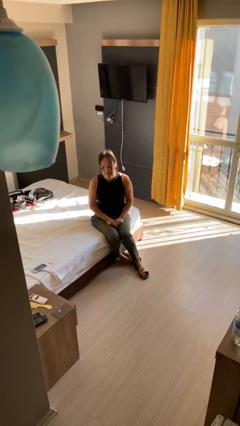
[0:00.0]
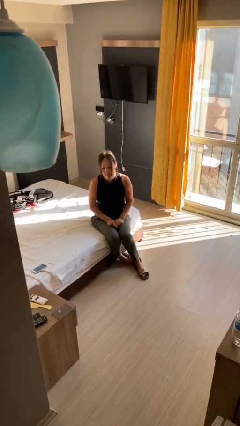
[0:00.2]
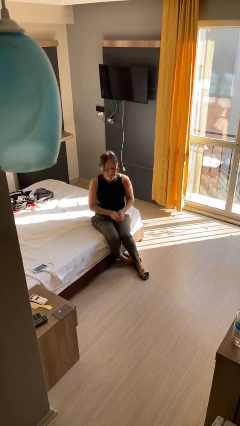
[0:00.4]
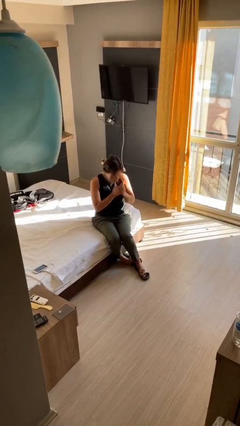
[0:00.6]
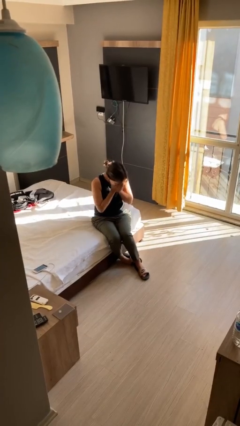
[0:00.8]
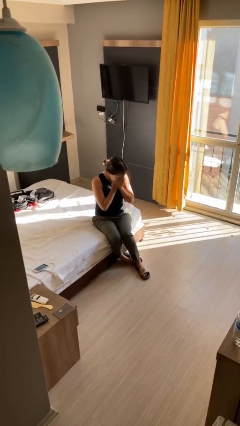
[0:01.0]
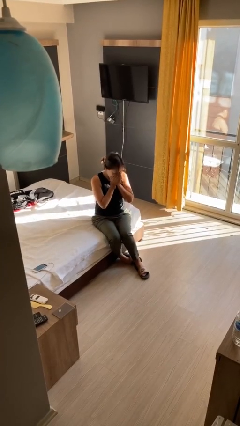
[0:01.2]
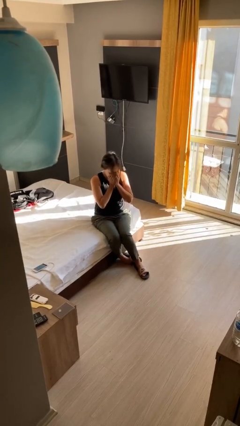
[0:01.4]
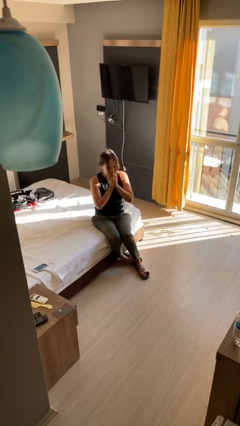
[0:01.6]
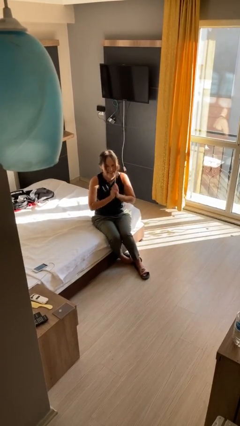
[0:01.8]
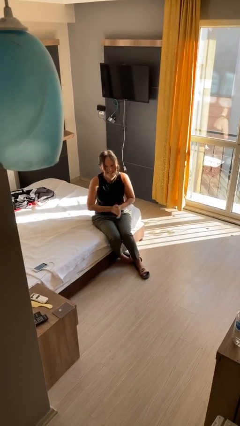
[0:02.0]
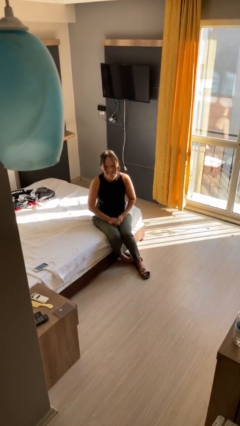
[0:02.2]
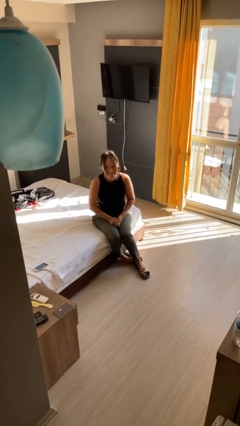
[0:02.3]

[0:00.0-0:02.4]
person sneezes into hand

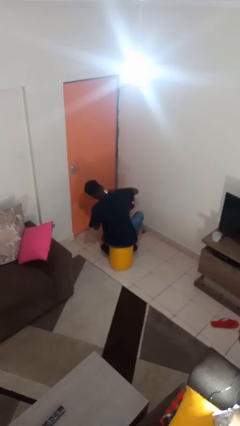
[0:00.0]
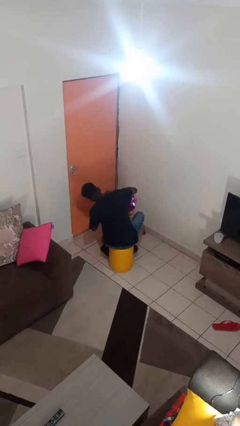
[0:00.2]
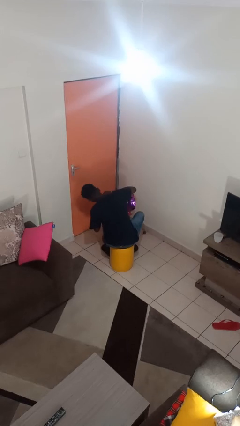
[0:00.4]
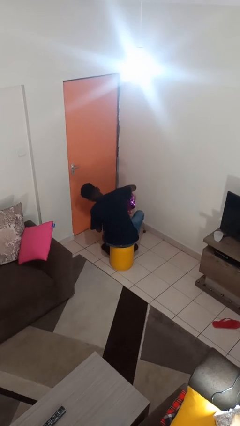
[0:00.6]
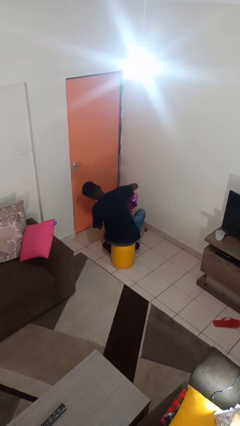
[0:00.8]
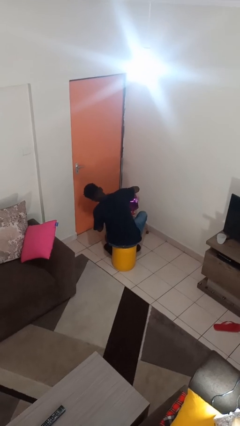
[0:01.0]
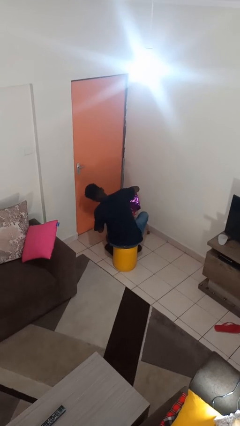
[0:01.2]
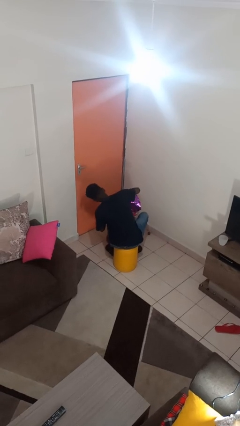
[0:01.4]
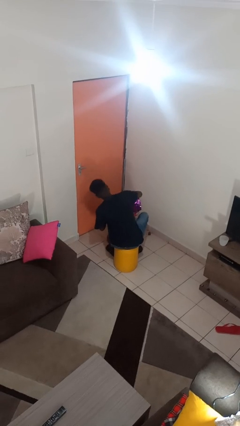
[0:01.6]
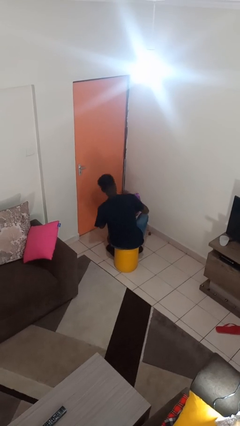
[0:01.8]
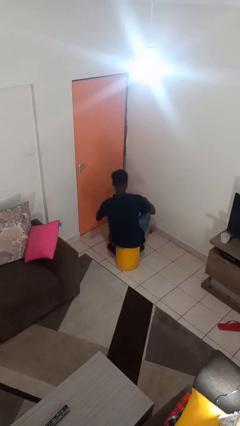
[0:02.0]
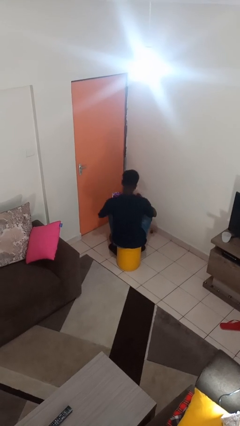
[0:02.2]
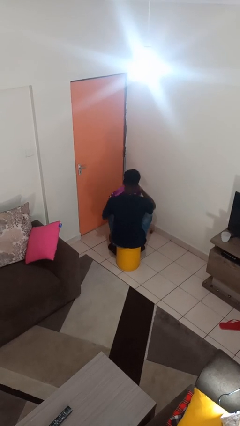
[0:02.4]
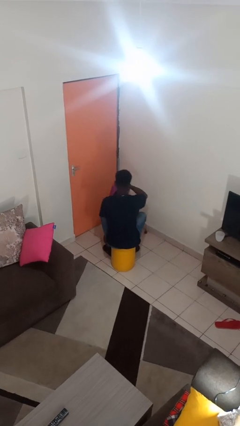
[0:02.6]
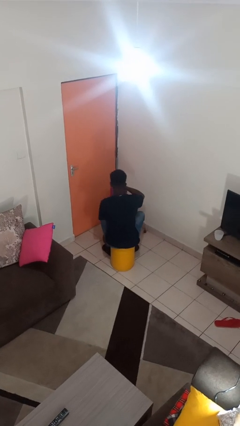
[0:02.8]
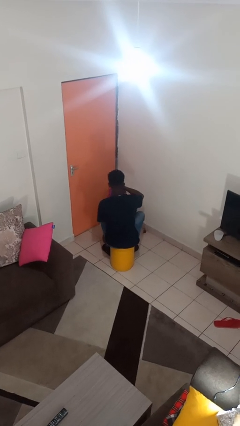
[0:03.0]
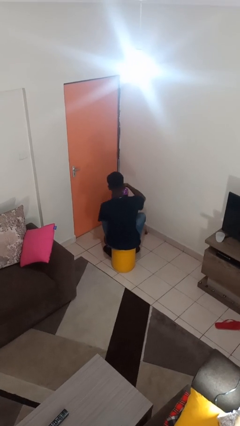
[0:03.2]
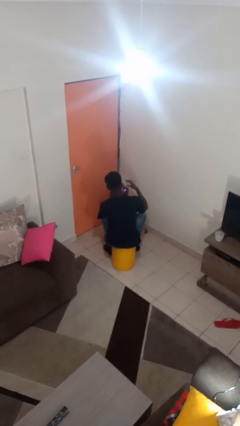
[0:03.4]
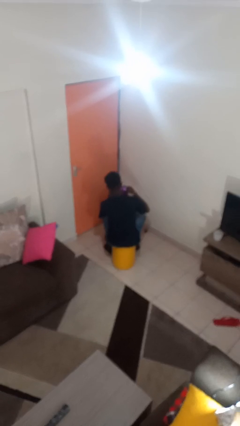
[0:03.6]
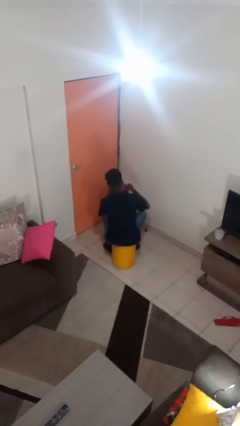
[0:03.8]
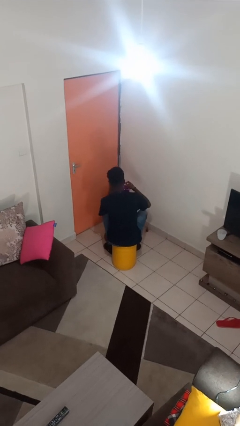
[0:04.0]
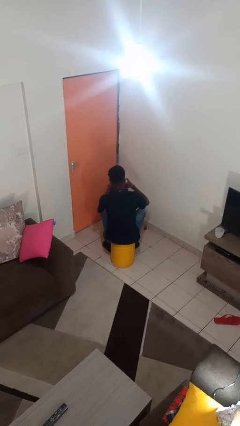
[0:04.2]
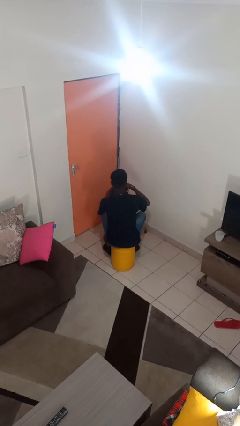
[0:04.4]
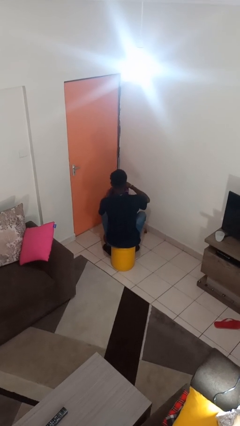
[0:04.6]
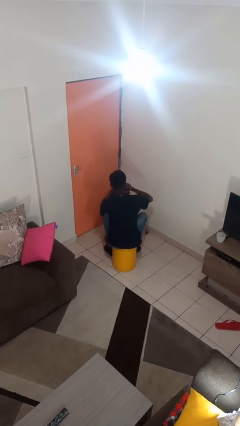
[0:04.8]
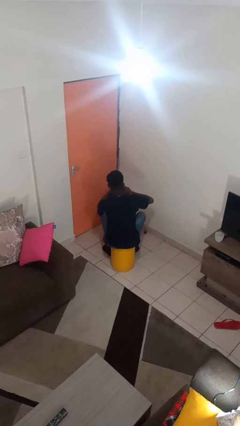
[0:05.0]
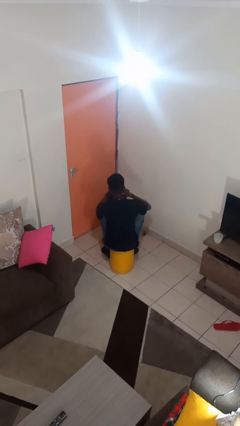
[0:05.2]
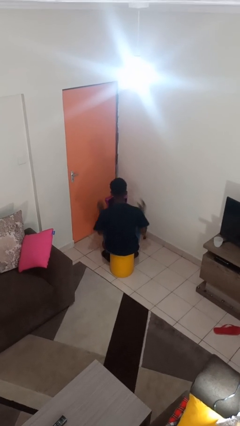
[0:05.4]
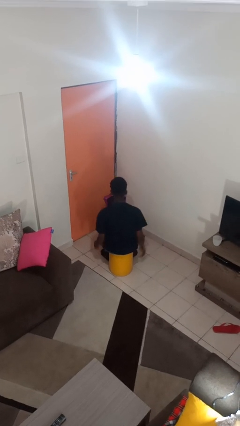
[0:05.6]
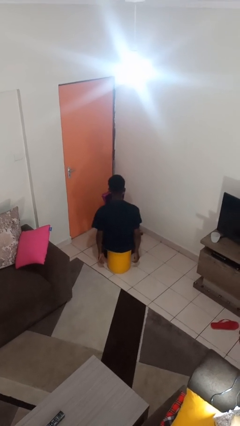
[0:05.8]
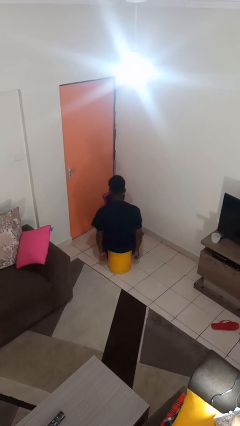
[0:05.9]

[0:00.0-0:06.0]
person wraps box

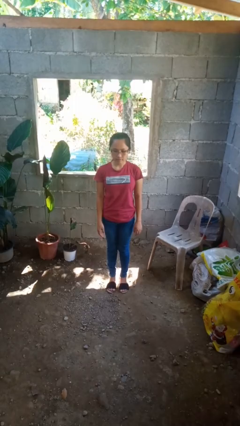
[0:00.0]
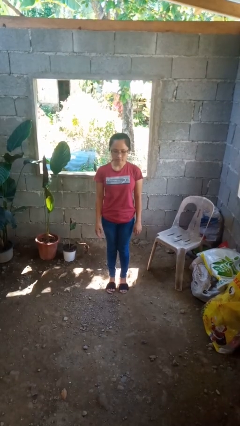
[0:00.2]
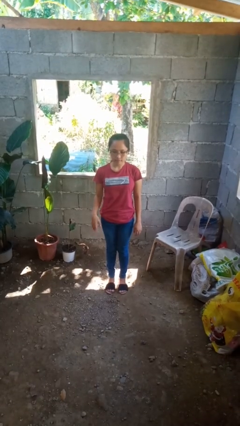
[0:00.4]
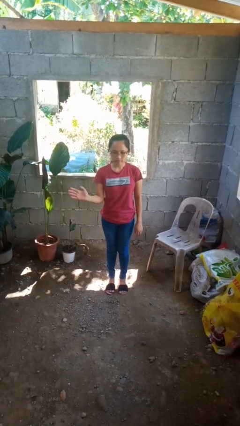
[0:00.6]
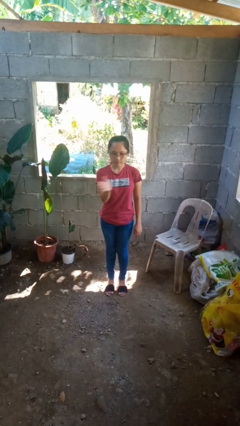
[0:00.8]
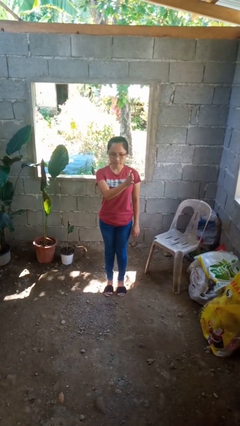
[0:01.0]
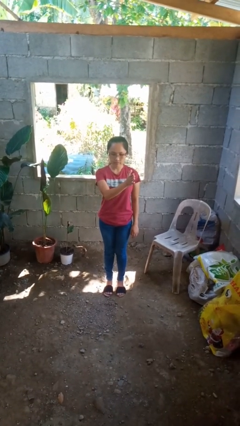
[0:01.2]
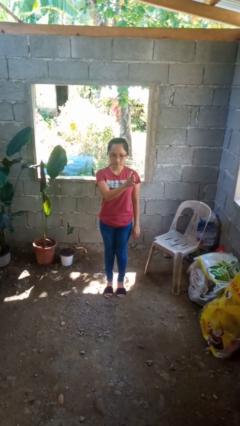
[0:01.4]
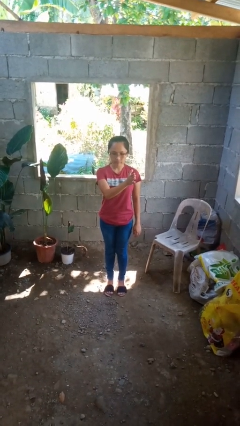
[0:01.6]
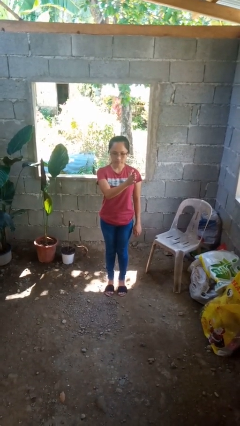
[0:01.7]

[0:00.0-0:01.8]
person gestures swipe left

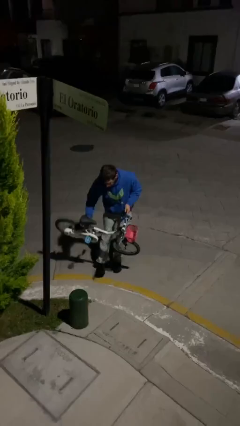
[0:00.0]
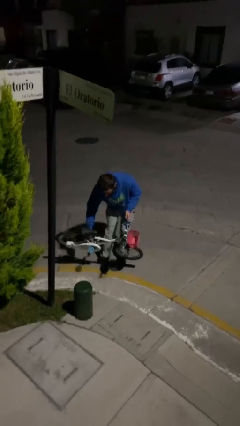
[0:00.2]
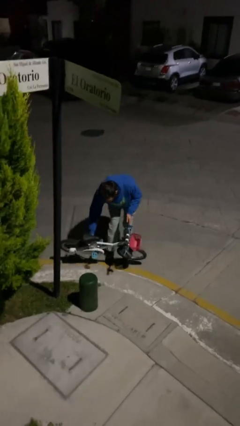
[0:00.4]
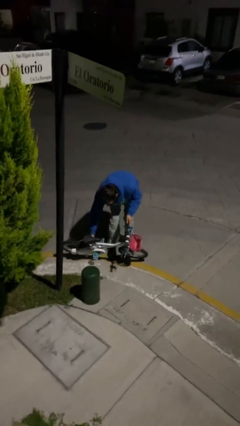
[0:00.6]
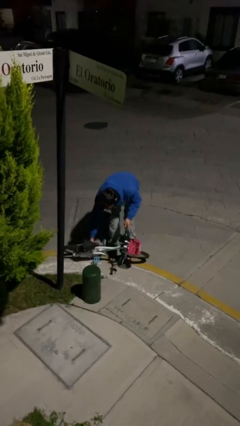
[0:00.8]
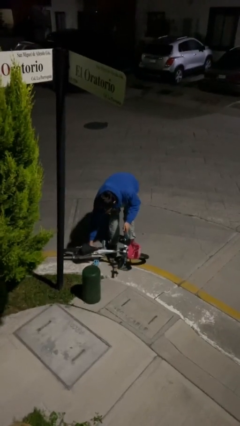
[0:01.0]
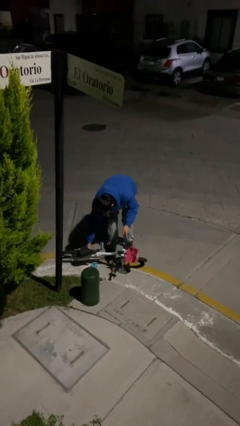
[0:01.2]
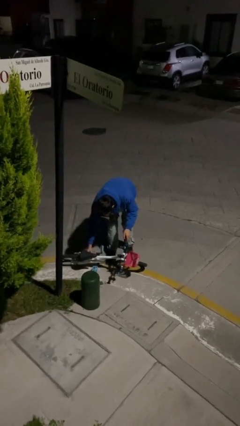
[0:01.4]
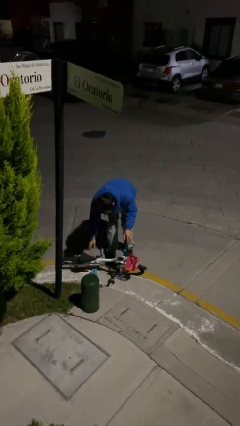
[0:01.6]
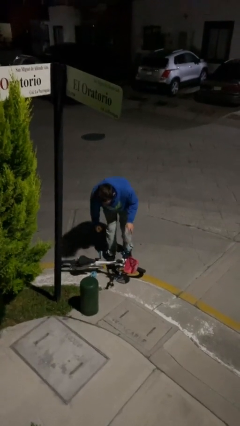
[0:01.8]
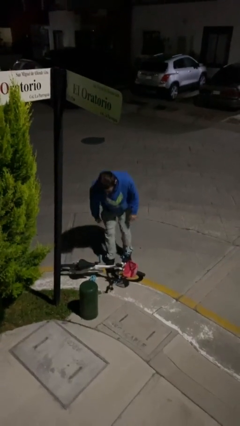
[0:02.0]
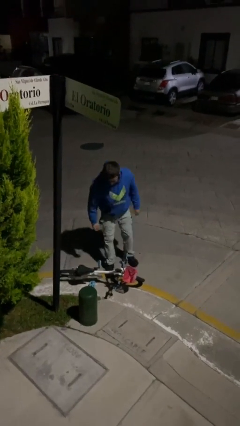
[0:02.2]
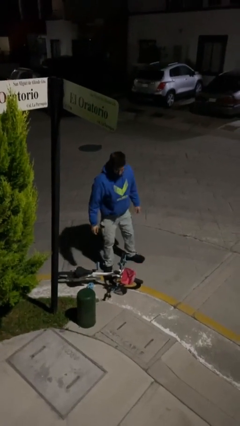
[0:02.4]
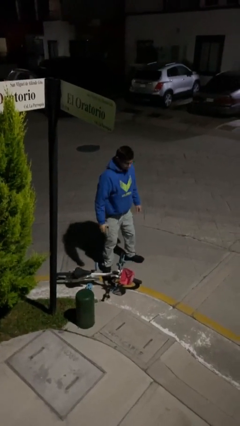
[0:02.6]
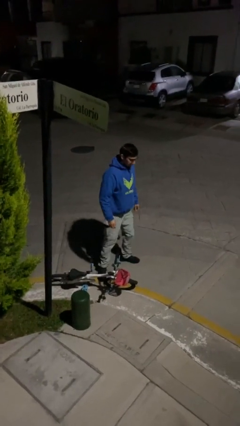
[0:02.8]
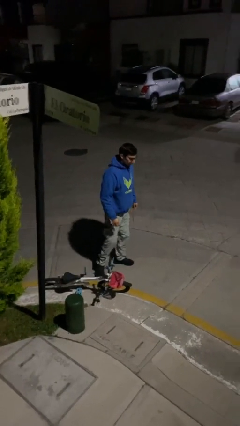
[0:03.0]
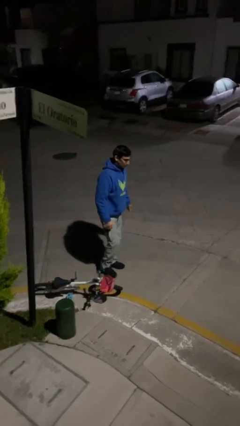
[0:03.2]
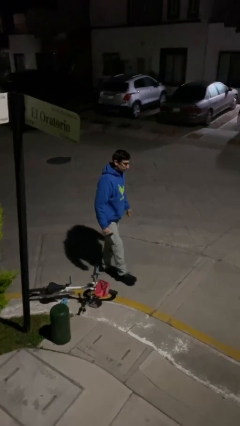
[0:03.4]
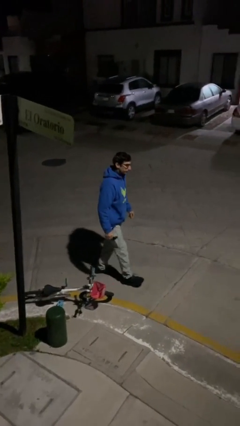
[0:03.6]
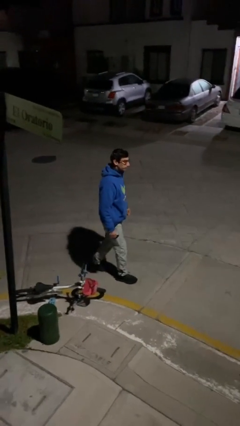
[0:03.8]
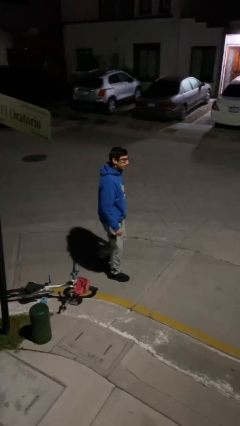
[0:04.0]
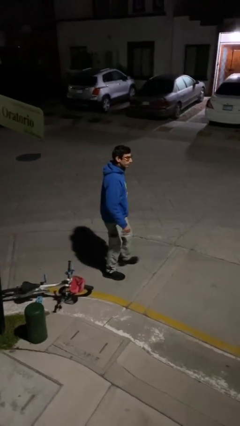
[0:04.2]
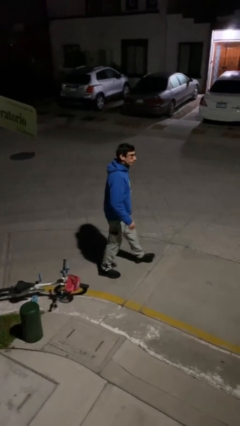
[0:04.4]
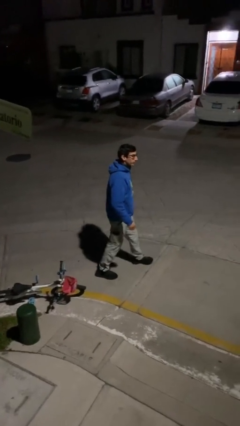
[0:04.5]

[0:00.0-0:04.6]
person puts down object on floor

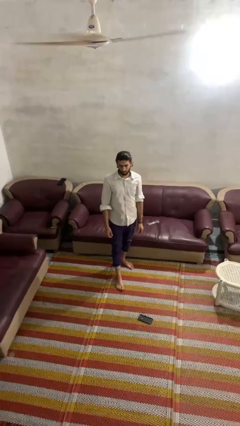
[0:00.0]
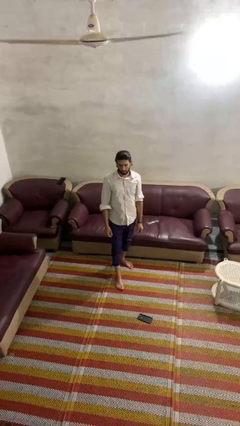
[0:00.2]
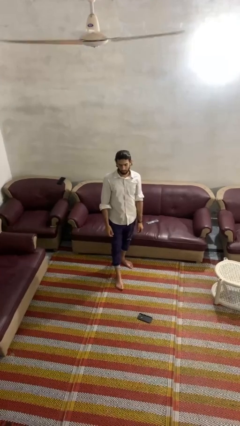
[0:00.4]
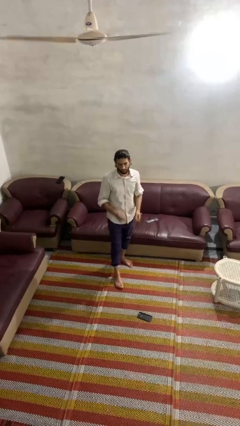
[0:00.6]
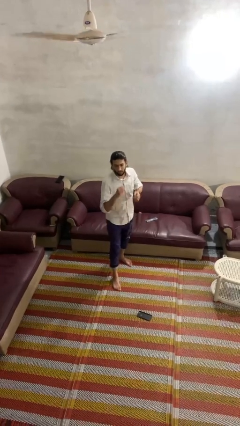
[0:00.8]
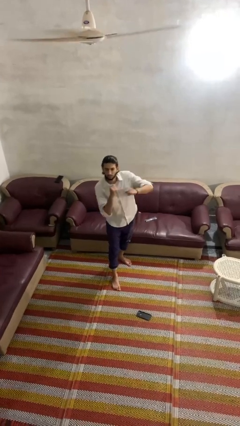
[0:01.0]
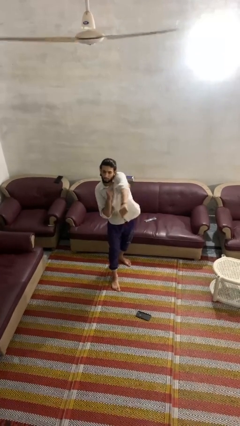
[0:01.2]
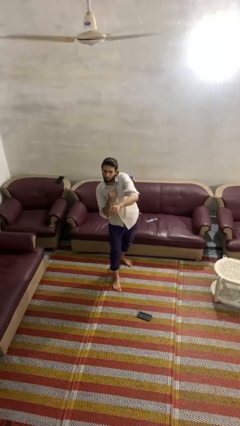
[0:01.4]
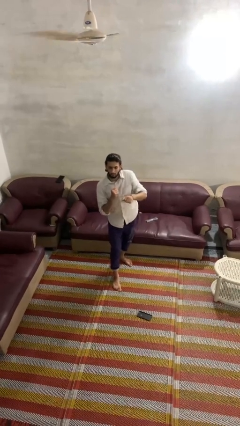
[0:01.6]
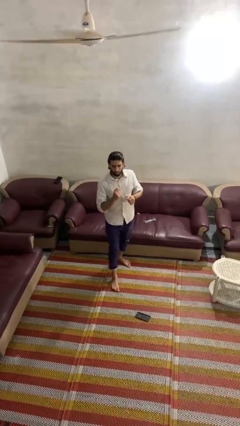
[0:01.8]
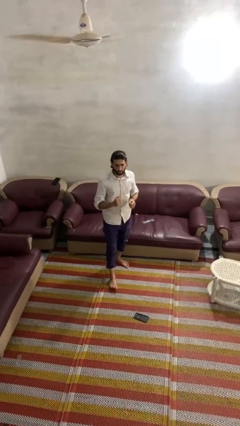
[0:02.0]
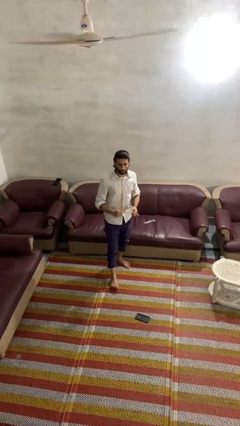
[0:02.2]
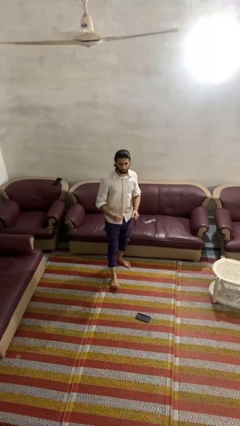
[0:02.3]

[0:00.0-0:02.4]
person punches

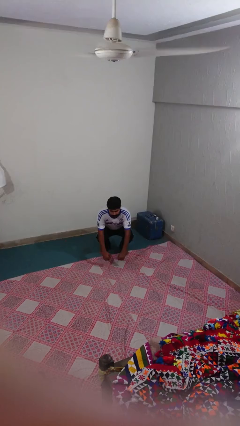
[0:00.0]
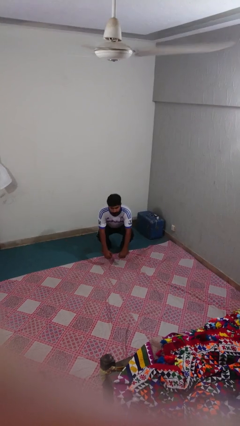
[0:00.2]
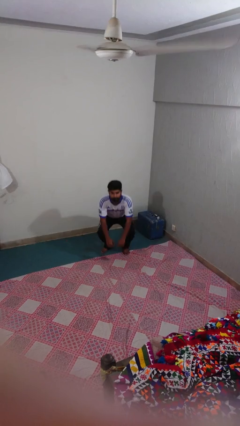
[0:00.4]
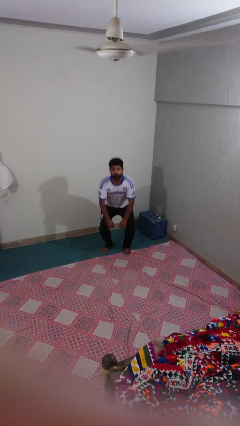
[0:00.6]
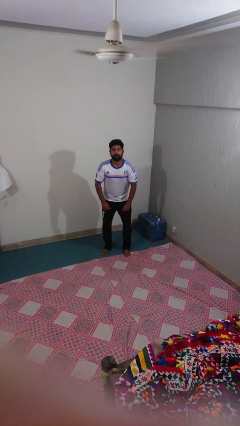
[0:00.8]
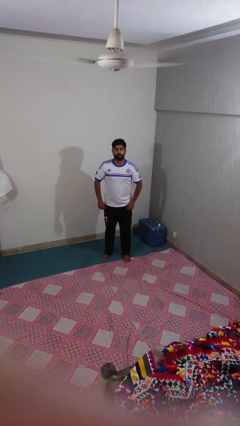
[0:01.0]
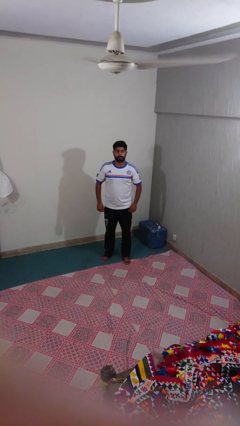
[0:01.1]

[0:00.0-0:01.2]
person stands up
